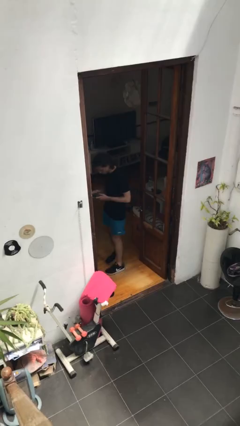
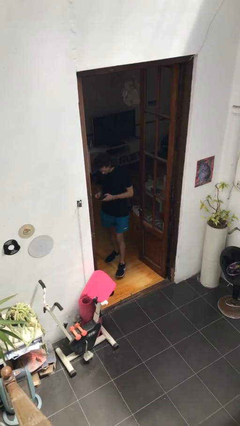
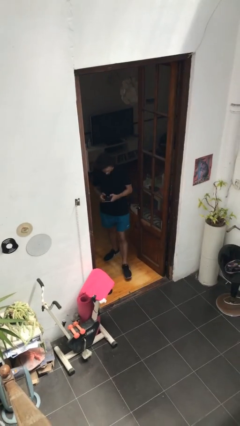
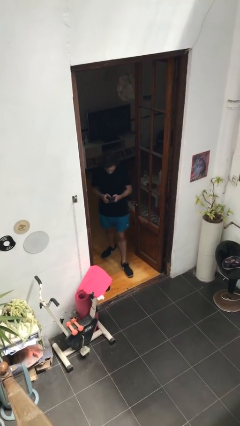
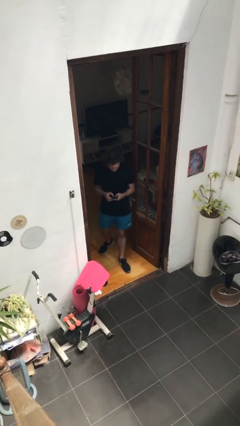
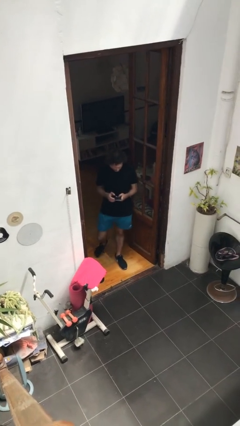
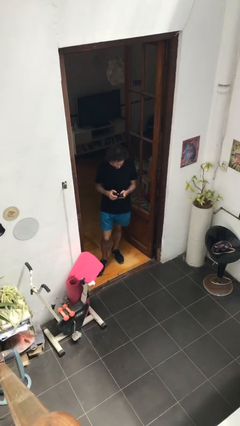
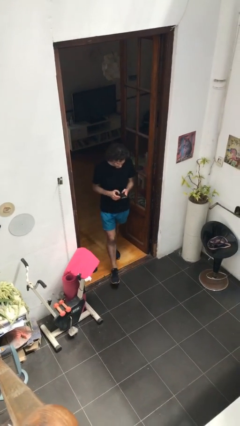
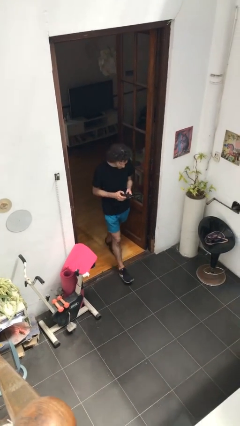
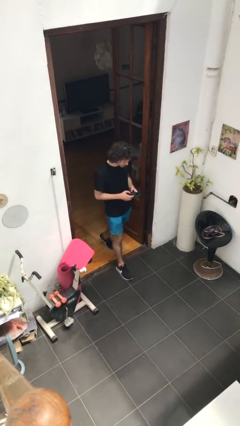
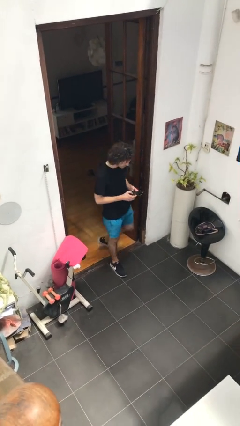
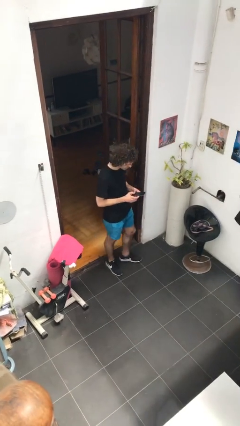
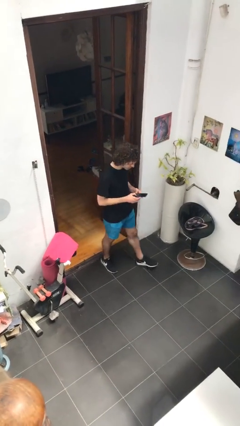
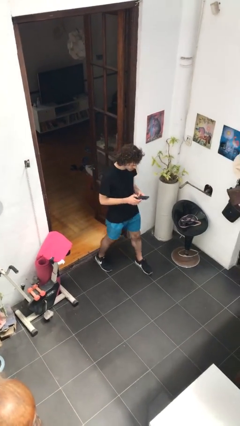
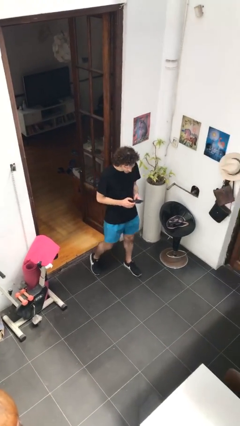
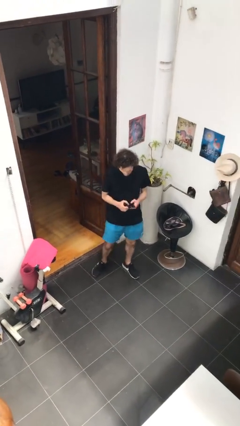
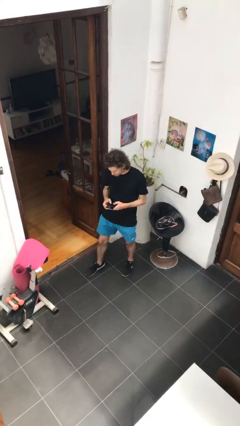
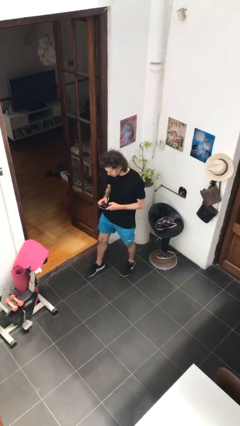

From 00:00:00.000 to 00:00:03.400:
person enters scene through structure

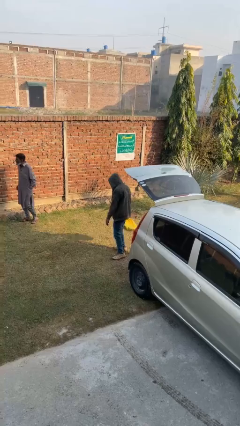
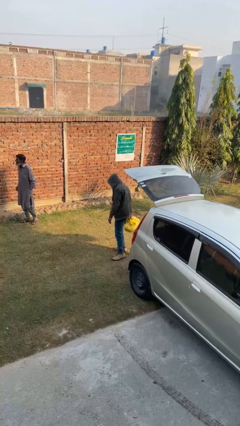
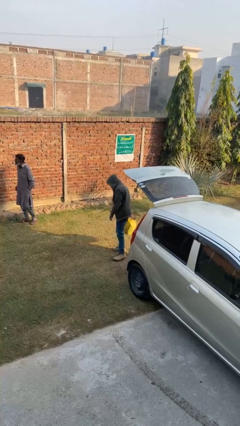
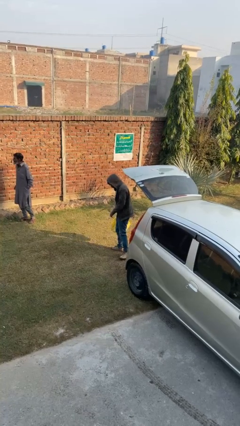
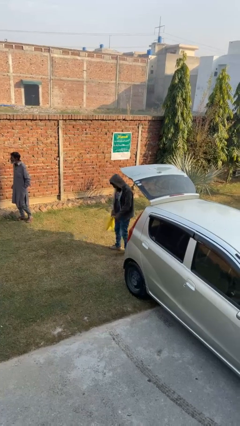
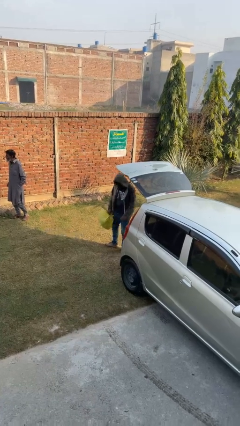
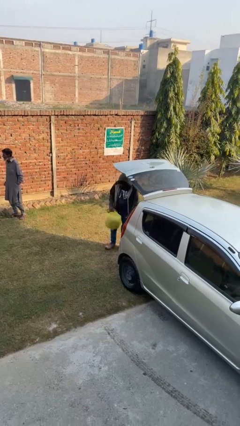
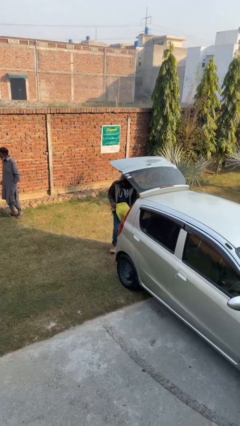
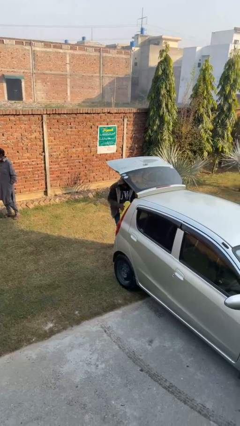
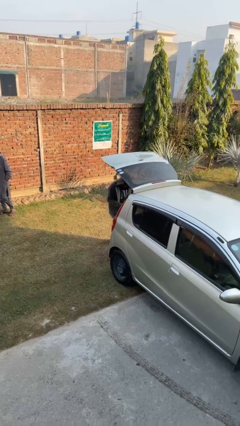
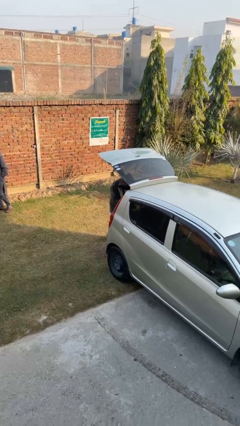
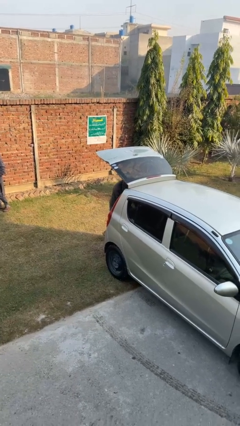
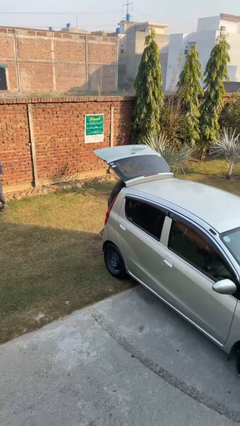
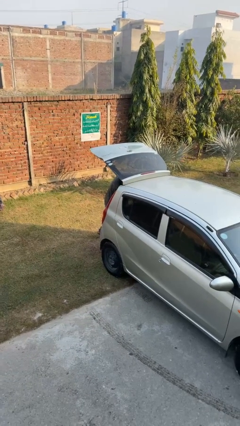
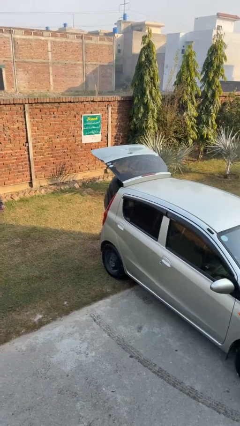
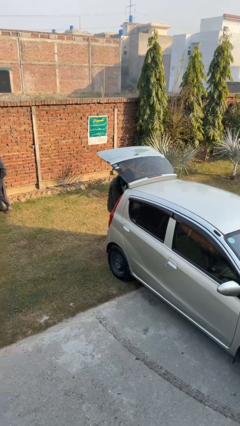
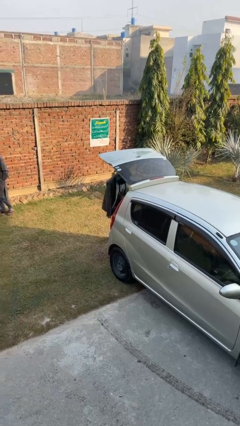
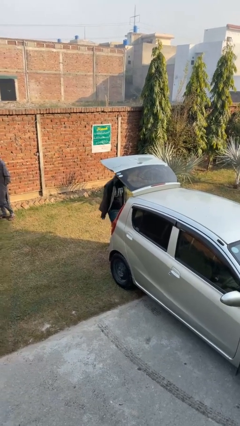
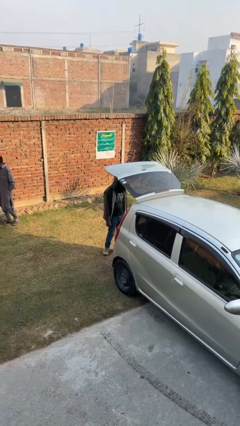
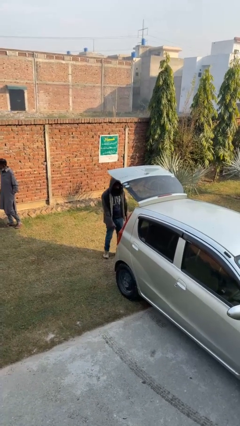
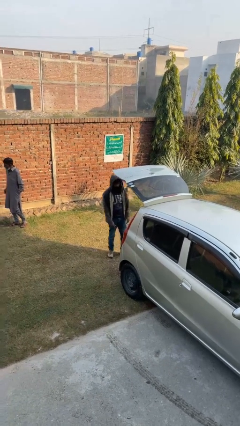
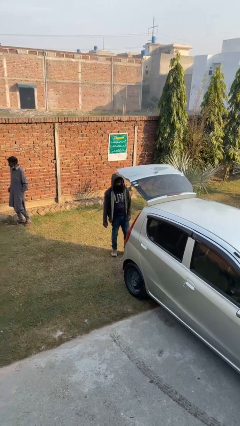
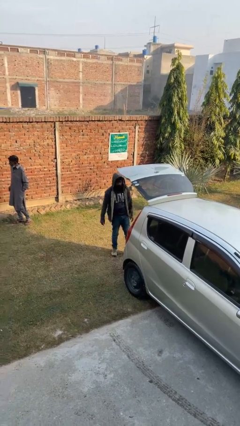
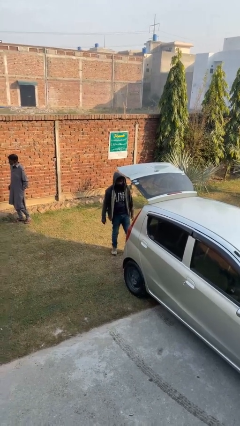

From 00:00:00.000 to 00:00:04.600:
person loads car

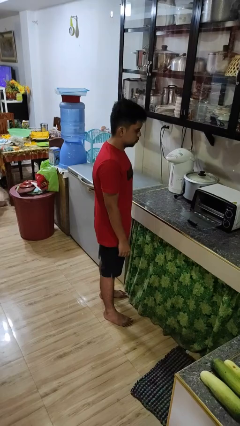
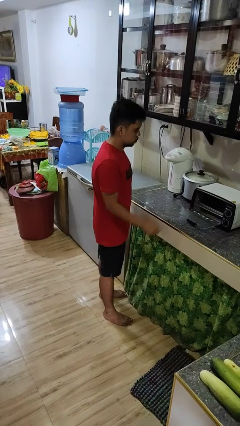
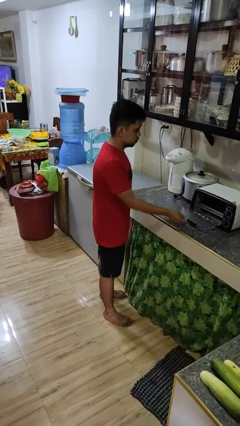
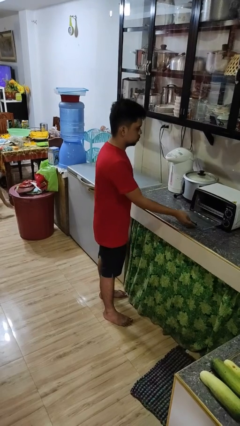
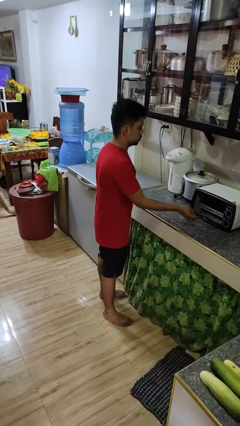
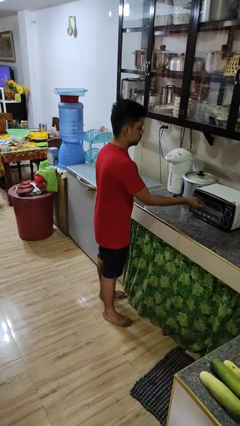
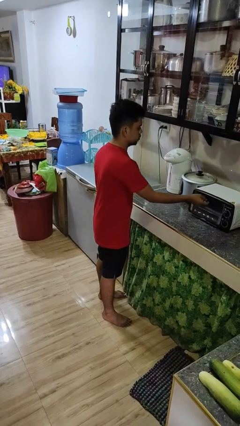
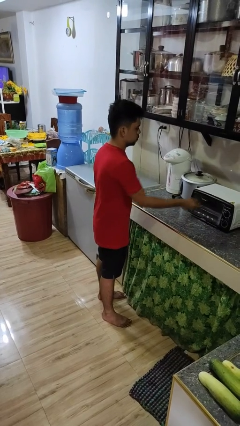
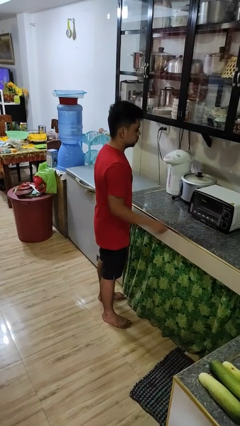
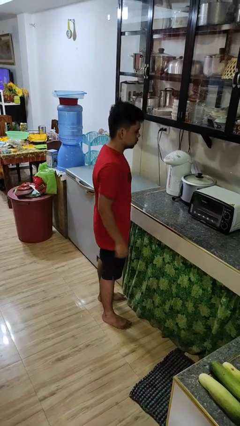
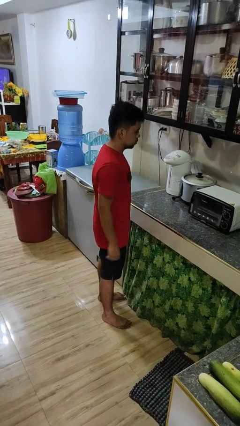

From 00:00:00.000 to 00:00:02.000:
person closes microwave

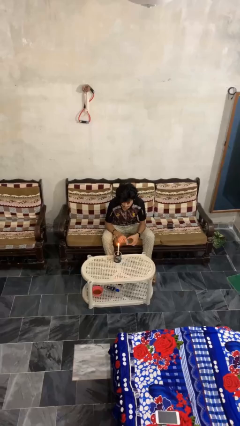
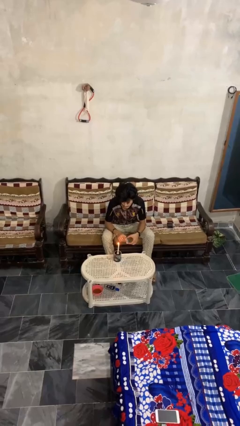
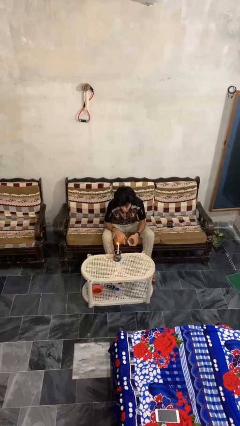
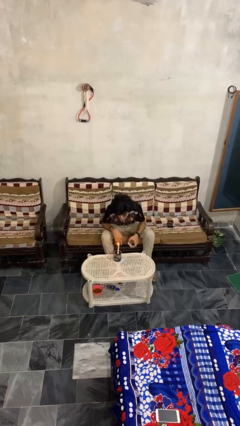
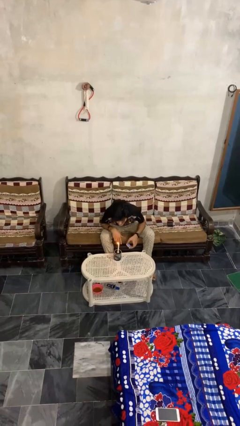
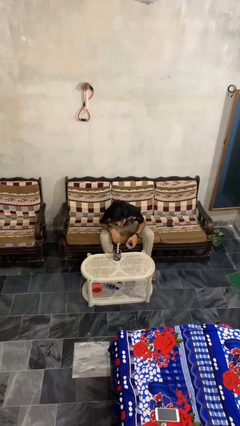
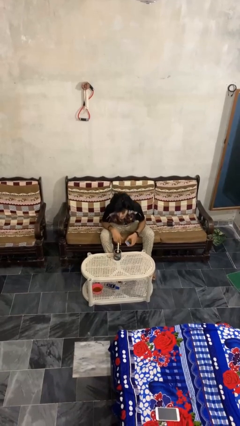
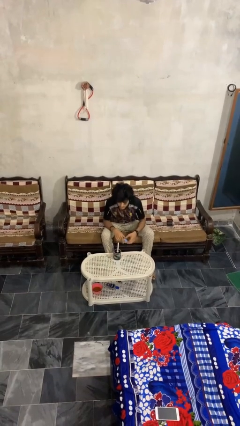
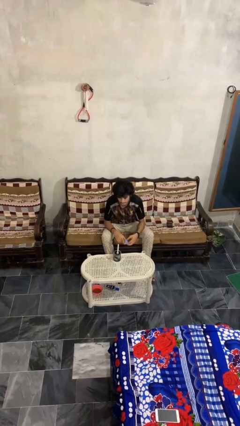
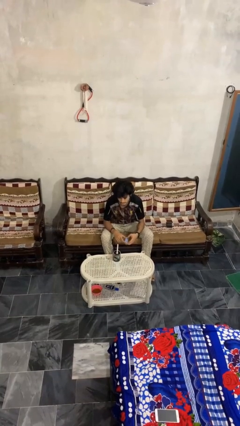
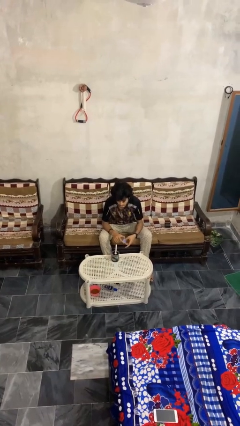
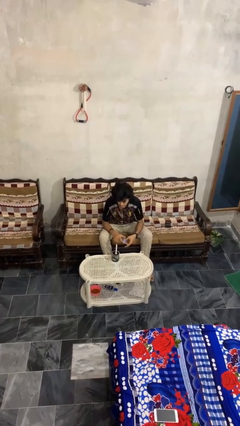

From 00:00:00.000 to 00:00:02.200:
person extinguishes candle

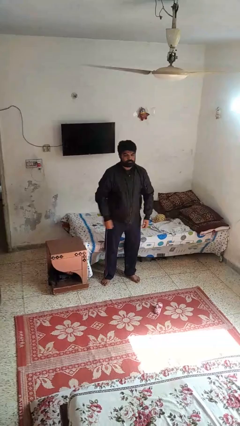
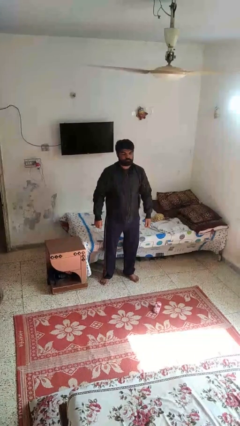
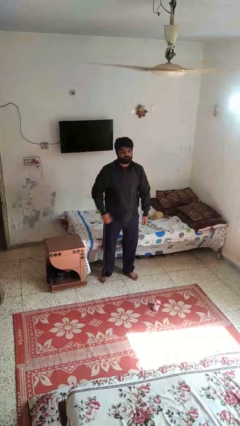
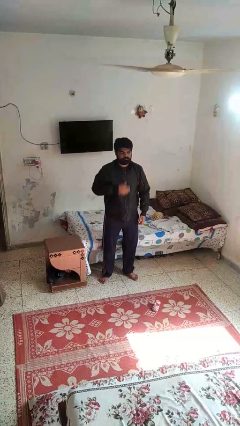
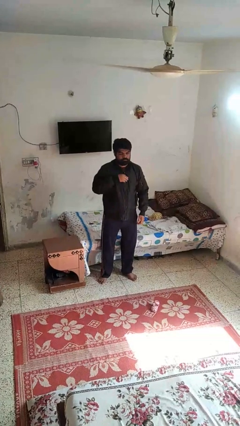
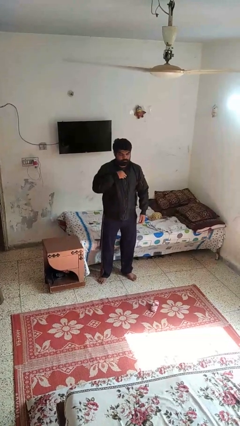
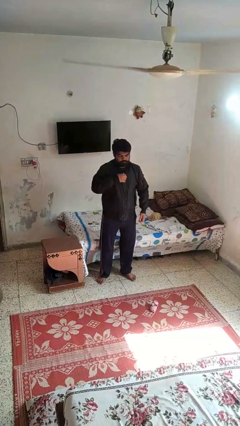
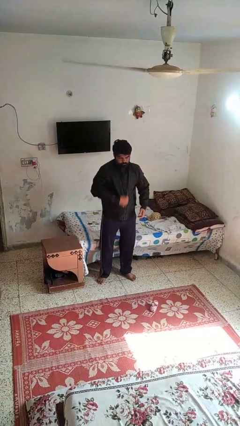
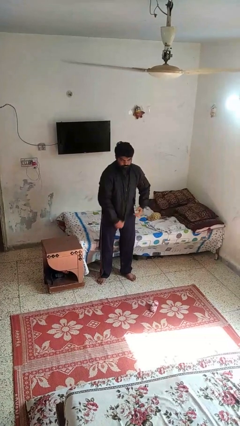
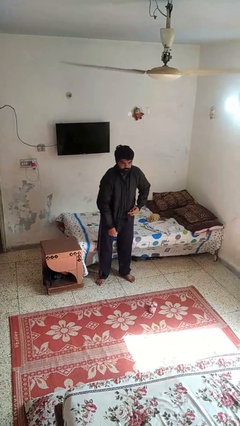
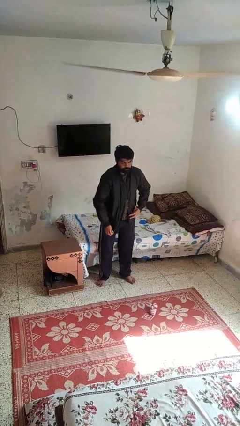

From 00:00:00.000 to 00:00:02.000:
person unzips jacket

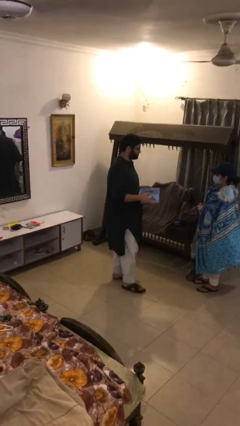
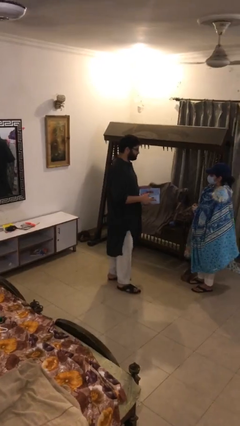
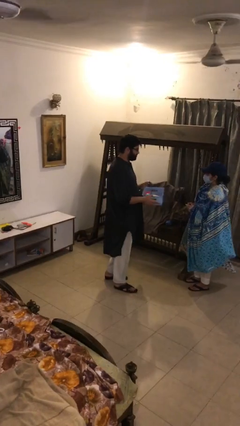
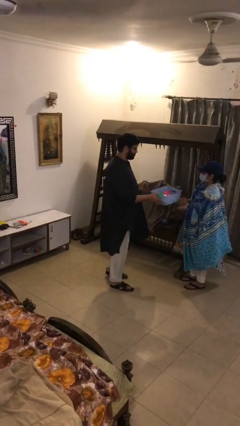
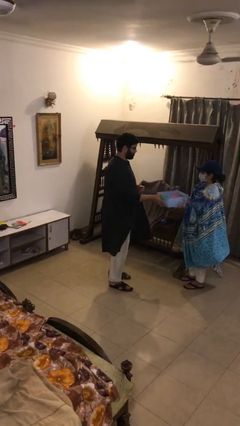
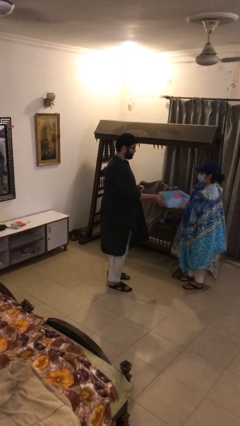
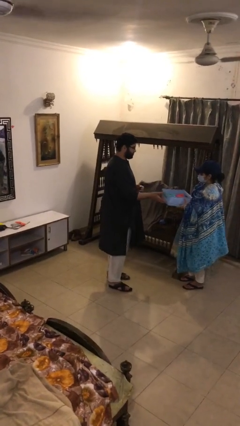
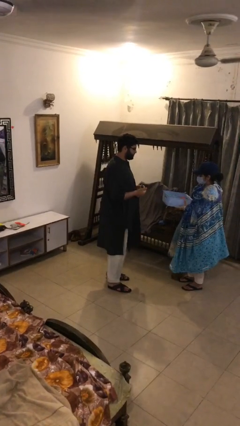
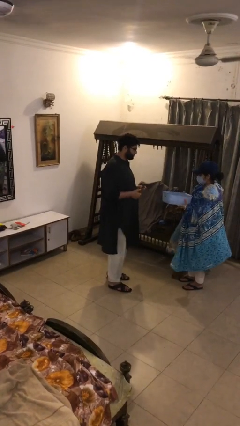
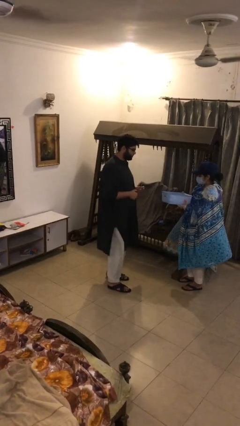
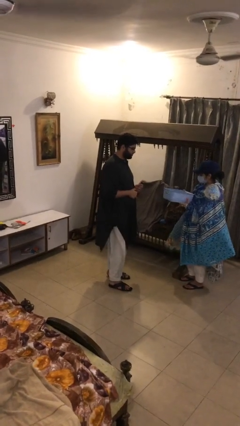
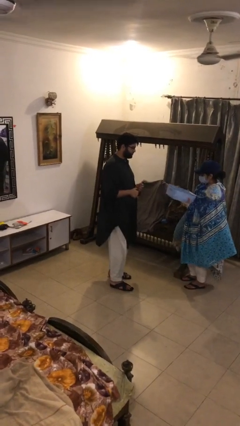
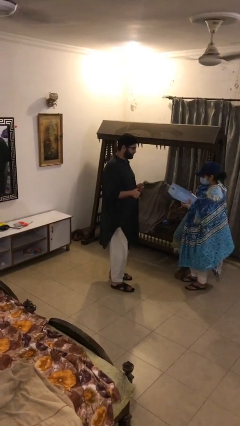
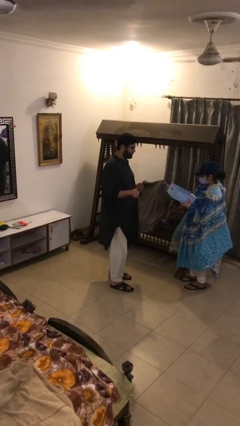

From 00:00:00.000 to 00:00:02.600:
person transfers object to person

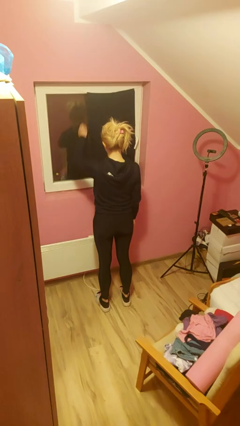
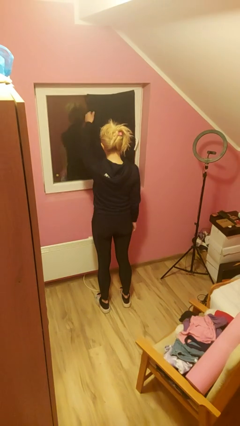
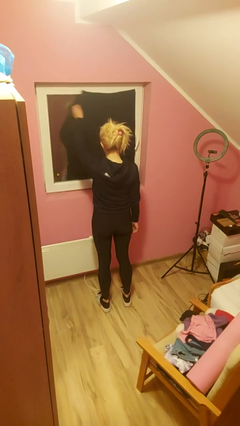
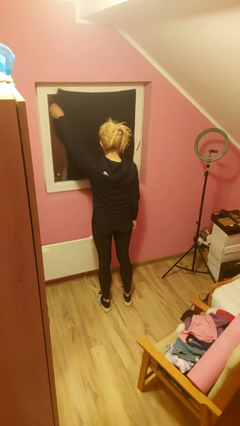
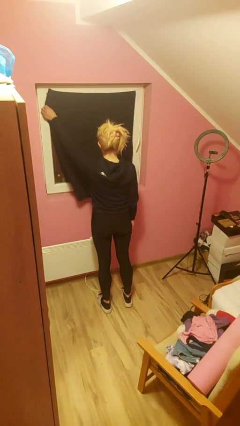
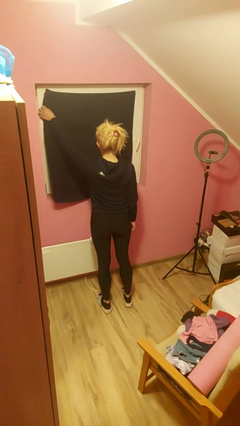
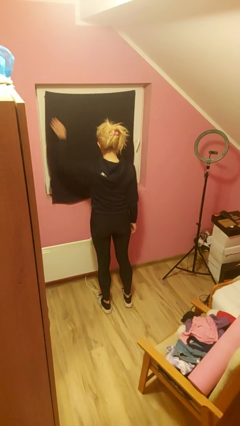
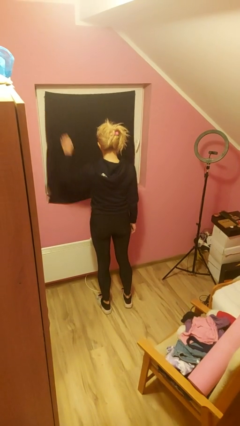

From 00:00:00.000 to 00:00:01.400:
person closes curtains
